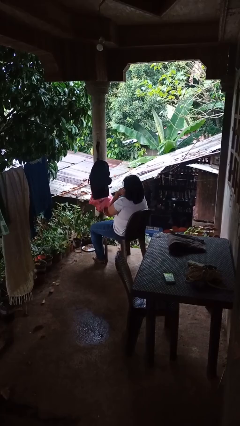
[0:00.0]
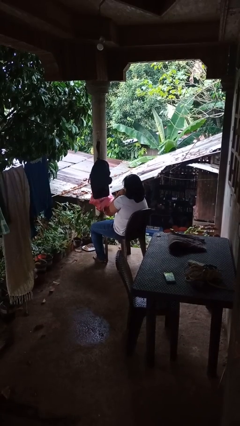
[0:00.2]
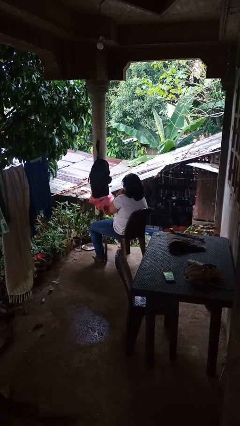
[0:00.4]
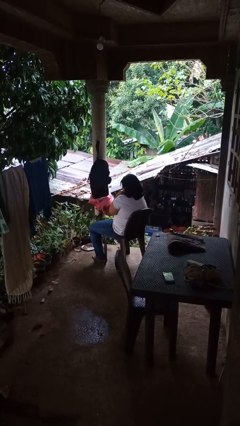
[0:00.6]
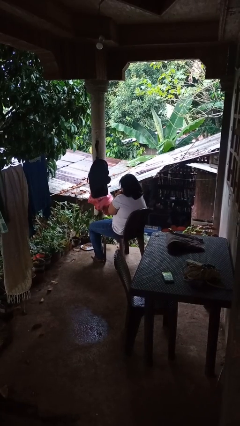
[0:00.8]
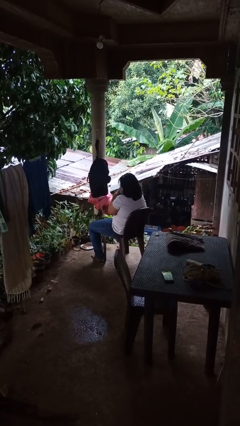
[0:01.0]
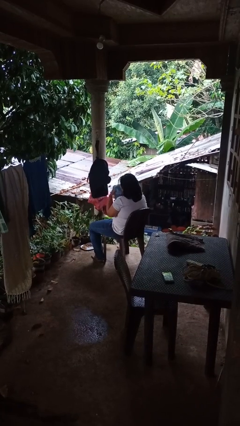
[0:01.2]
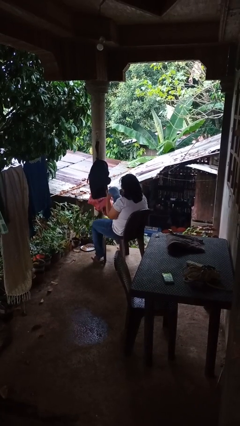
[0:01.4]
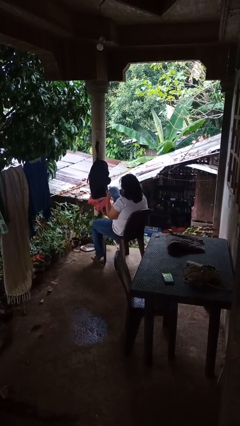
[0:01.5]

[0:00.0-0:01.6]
person hugs stuffed animal

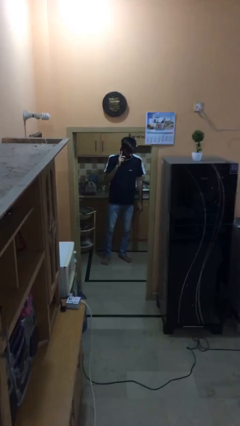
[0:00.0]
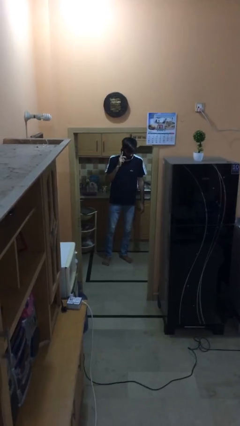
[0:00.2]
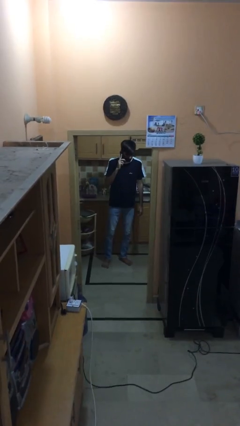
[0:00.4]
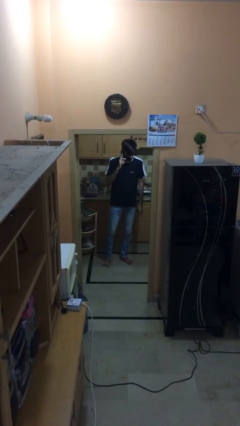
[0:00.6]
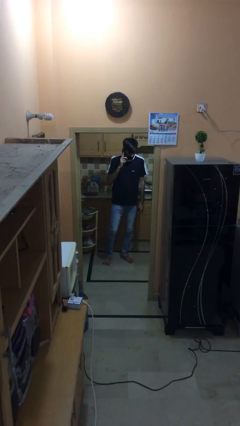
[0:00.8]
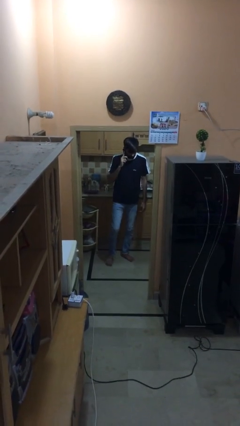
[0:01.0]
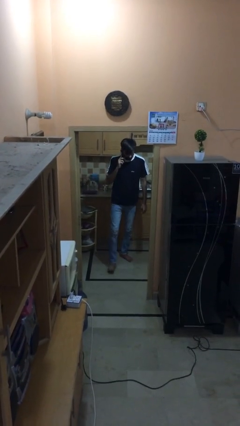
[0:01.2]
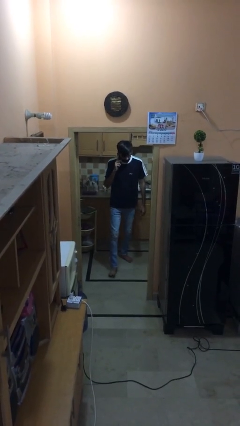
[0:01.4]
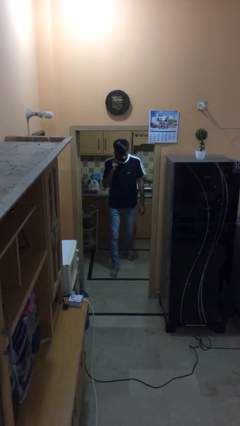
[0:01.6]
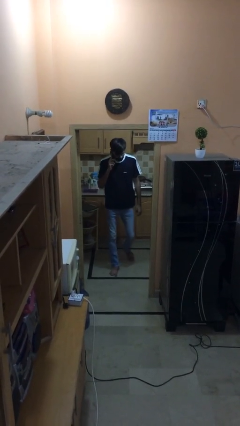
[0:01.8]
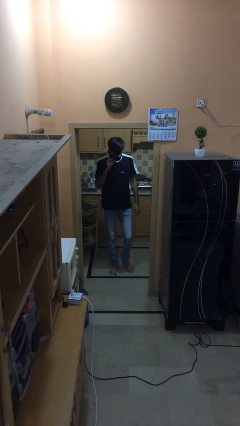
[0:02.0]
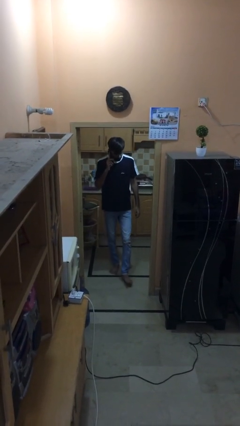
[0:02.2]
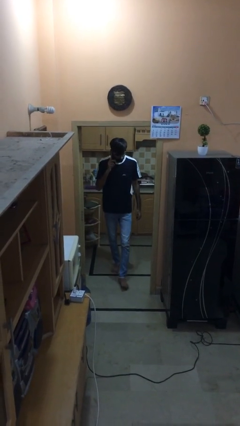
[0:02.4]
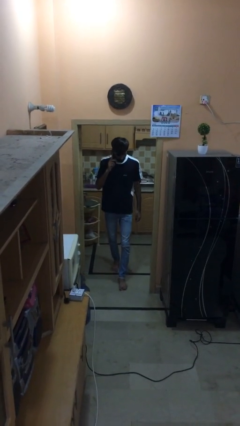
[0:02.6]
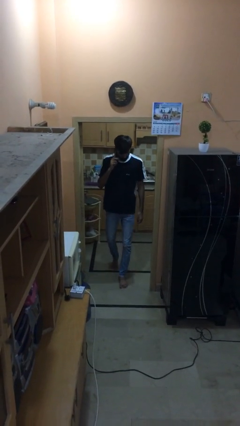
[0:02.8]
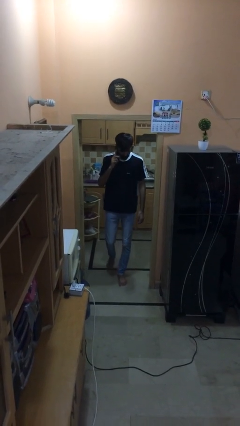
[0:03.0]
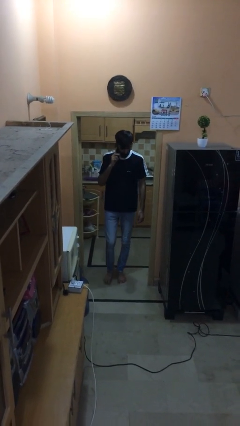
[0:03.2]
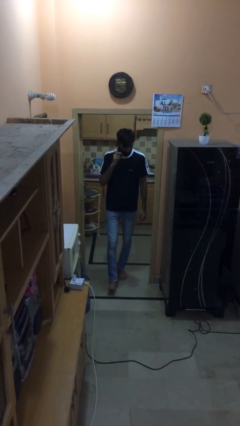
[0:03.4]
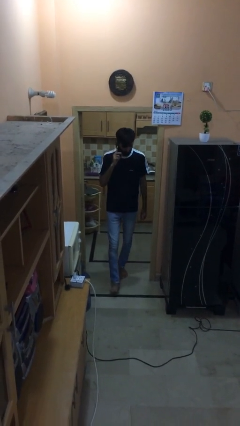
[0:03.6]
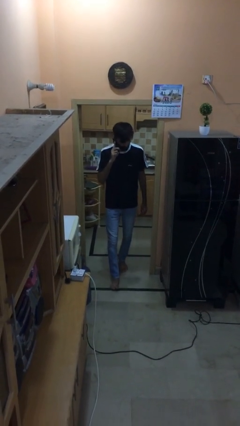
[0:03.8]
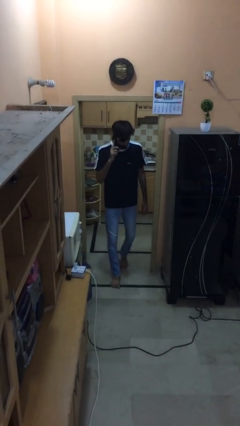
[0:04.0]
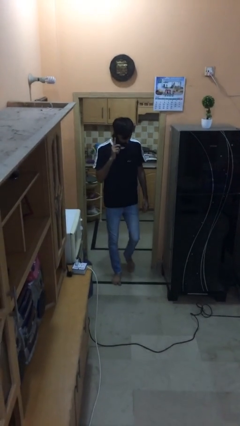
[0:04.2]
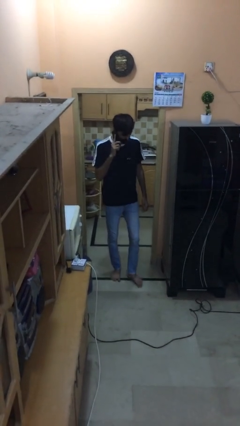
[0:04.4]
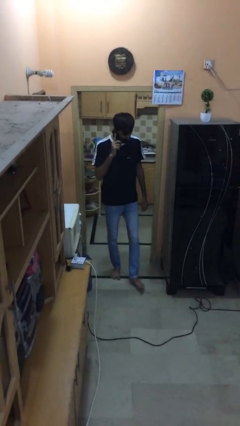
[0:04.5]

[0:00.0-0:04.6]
person enters scene through structure

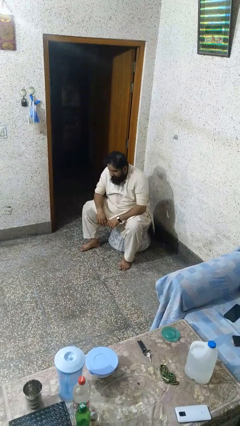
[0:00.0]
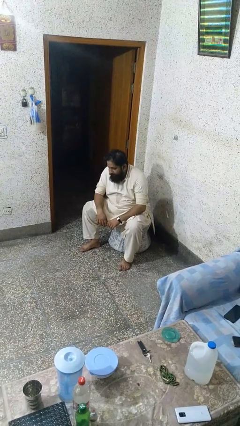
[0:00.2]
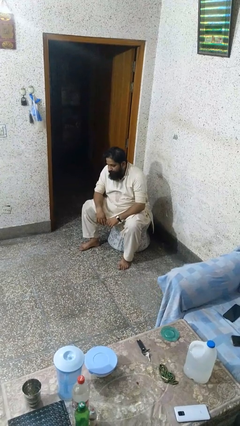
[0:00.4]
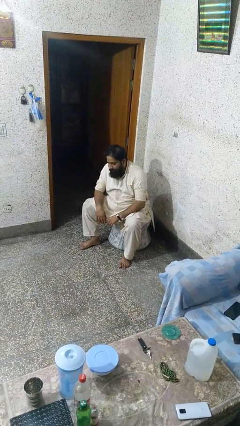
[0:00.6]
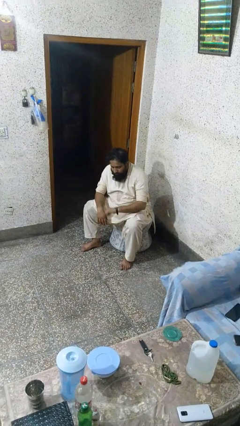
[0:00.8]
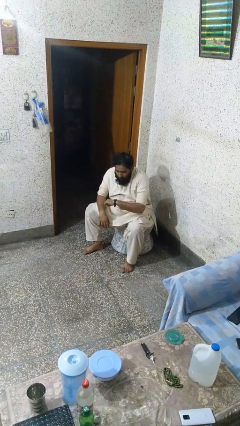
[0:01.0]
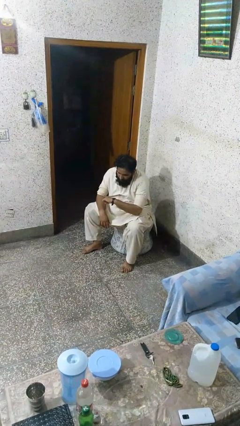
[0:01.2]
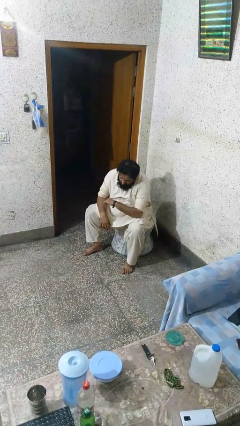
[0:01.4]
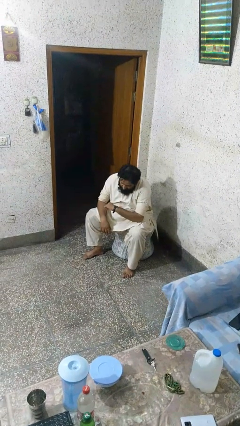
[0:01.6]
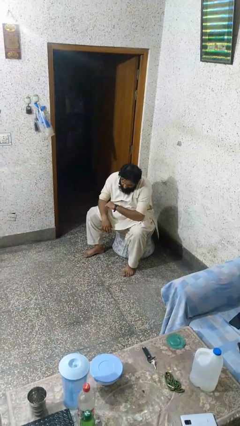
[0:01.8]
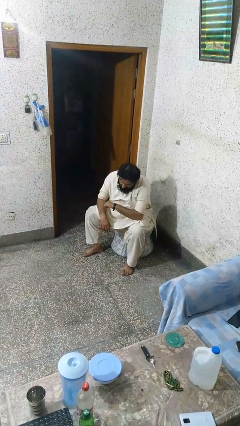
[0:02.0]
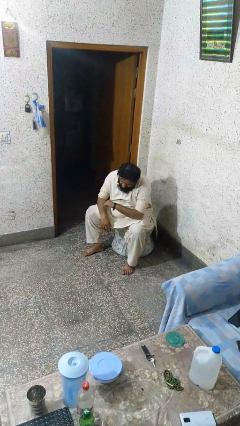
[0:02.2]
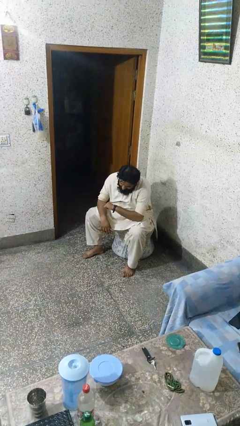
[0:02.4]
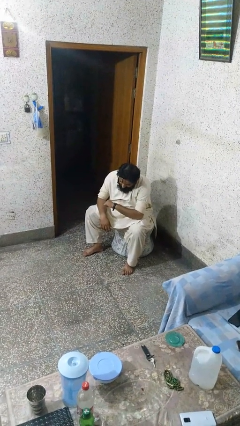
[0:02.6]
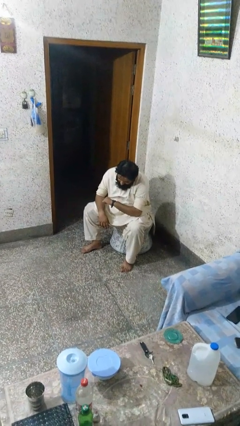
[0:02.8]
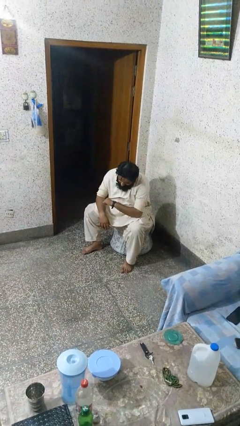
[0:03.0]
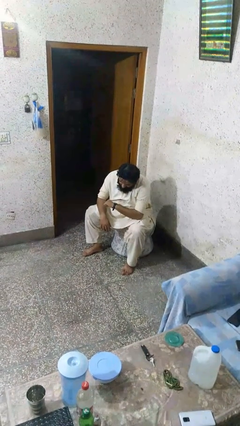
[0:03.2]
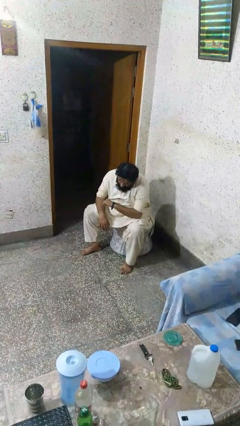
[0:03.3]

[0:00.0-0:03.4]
person looks at wristwatch

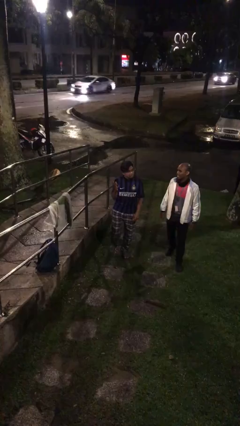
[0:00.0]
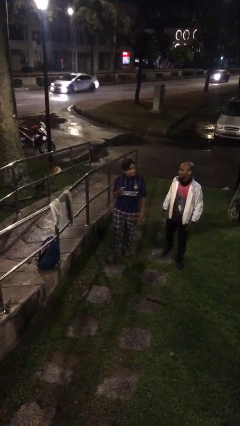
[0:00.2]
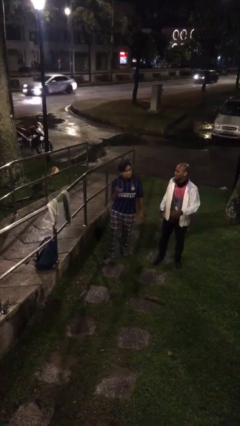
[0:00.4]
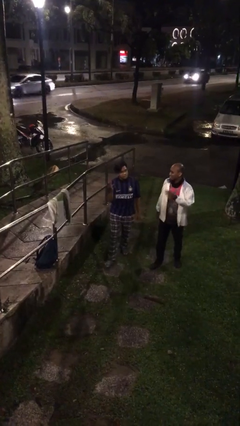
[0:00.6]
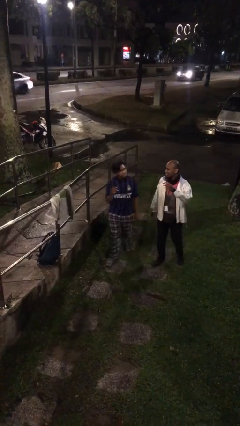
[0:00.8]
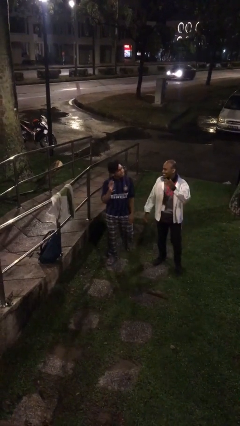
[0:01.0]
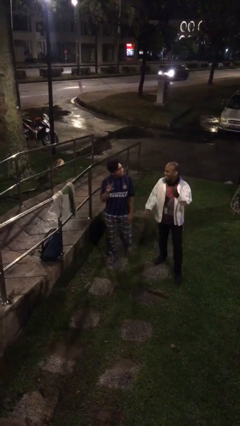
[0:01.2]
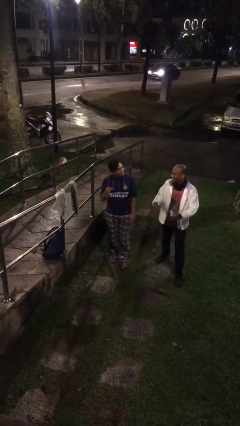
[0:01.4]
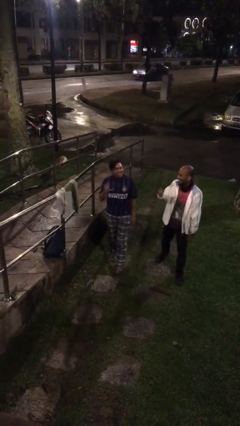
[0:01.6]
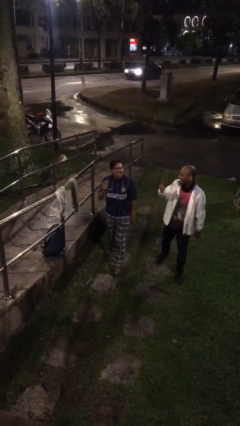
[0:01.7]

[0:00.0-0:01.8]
person talks to person

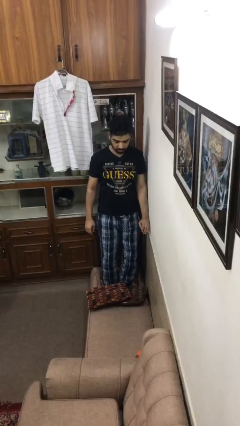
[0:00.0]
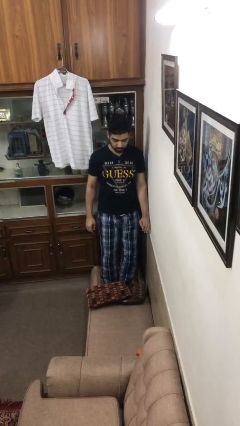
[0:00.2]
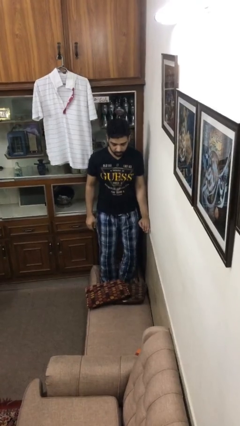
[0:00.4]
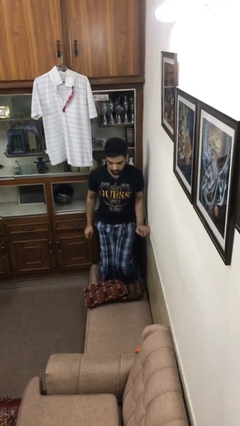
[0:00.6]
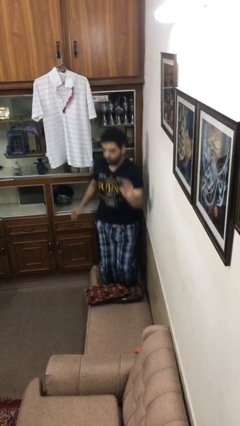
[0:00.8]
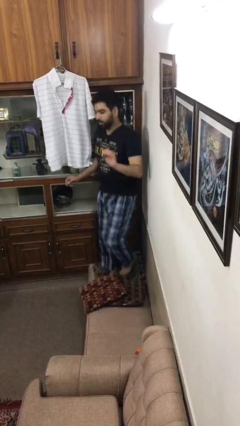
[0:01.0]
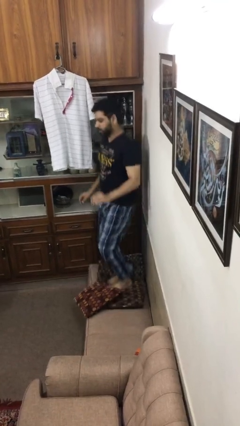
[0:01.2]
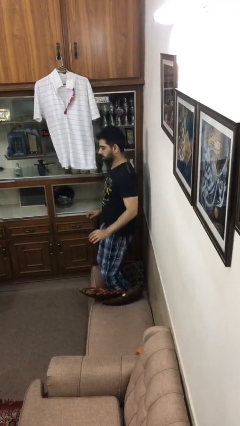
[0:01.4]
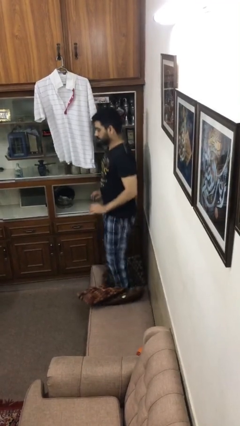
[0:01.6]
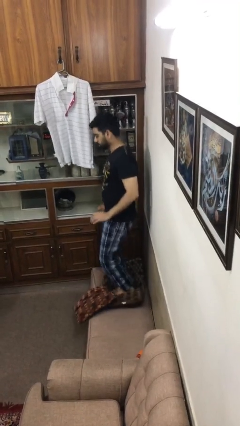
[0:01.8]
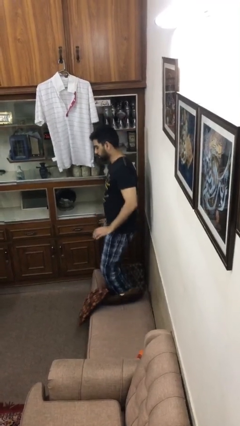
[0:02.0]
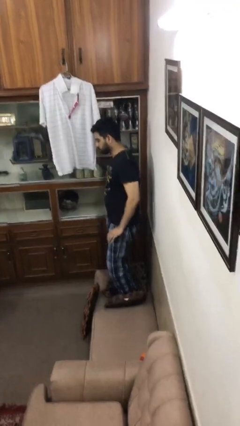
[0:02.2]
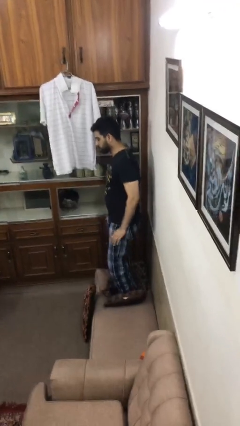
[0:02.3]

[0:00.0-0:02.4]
person jumps on couch

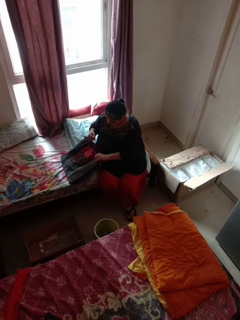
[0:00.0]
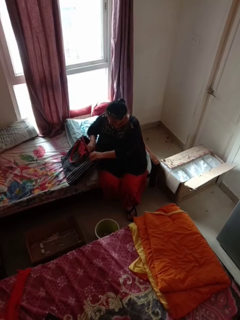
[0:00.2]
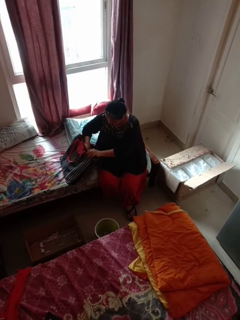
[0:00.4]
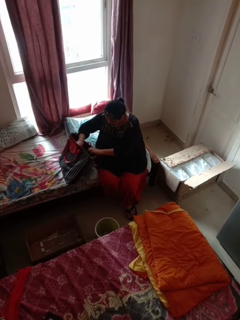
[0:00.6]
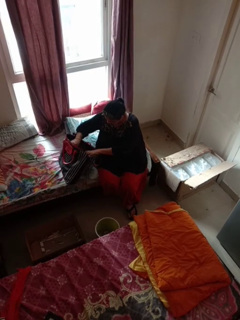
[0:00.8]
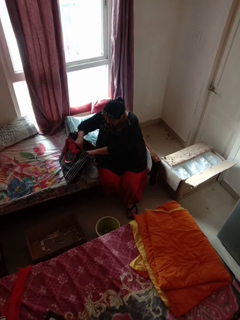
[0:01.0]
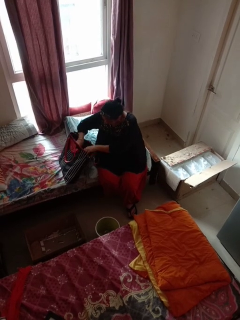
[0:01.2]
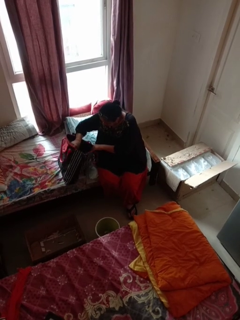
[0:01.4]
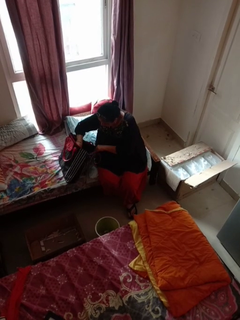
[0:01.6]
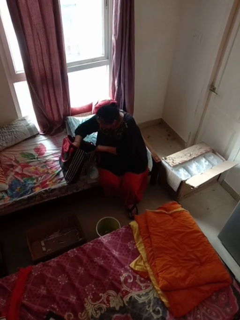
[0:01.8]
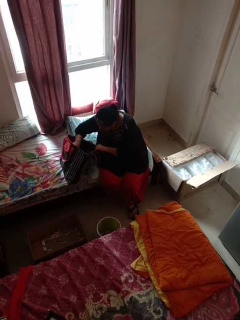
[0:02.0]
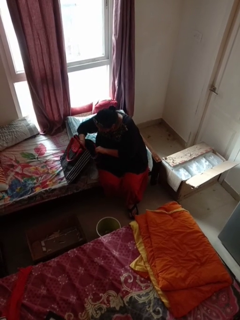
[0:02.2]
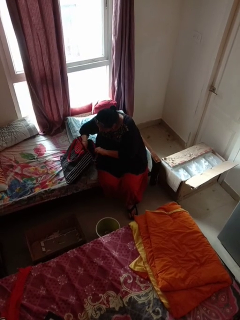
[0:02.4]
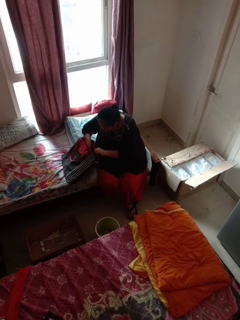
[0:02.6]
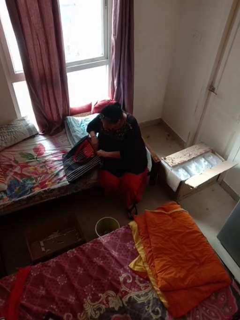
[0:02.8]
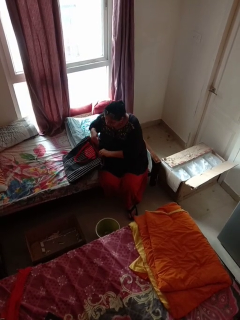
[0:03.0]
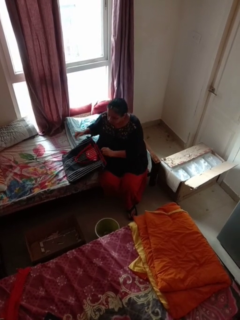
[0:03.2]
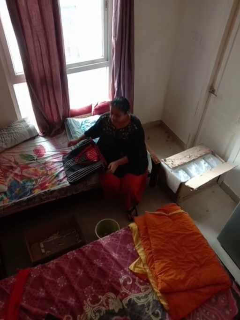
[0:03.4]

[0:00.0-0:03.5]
person searches in bag

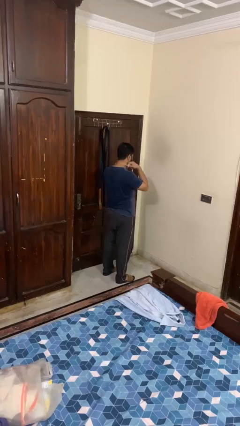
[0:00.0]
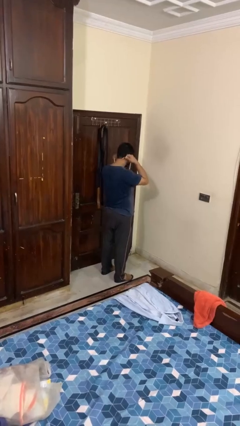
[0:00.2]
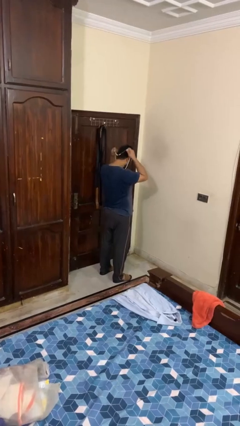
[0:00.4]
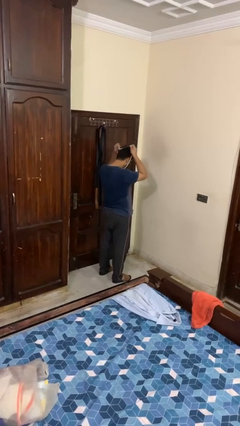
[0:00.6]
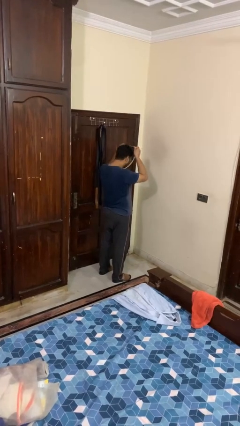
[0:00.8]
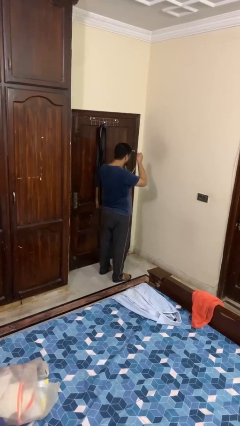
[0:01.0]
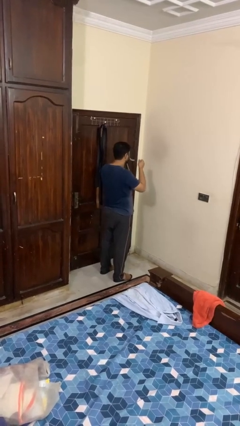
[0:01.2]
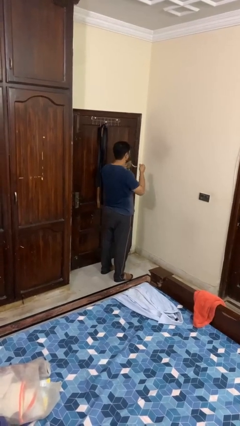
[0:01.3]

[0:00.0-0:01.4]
person takes off necklace
